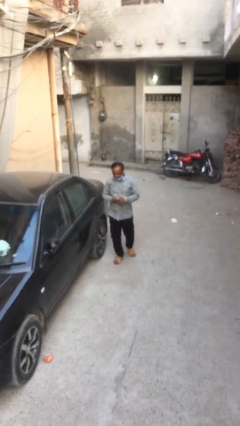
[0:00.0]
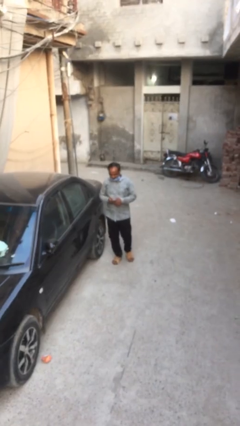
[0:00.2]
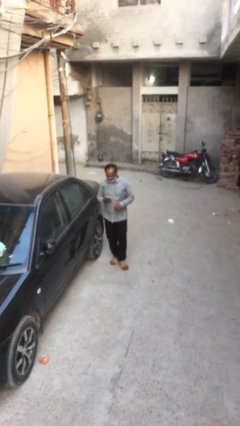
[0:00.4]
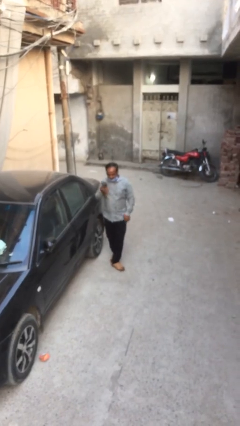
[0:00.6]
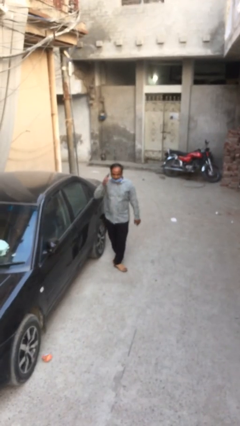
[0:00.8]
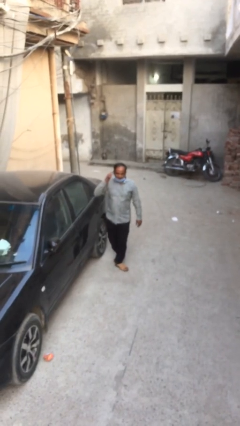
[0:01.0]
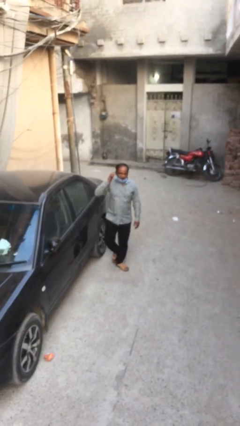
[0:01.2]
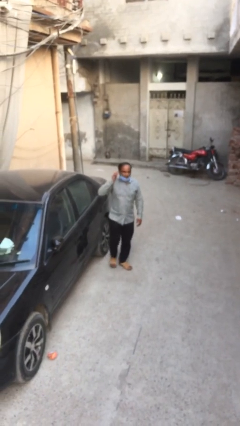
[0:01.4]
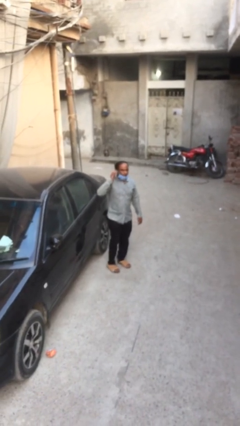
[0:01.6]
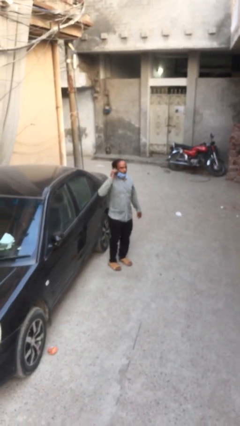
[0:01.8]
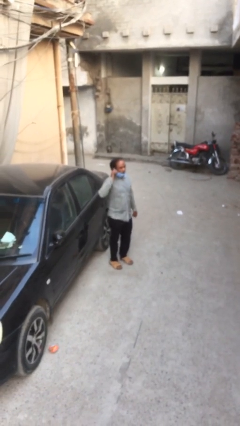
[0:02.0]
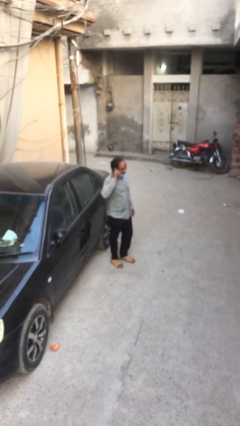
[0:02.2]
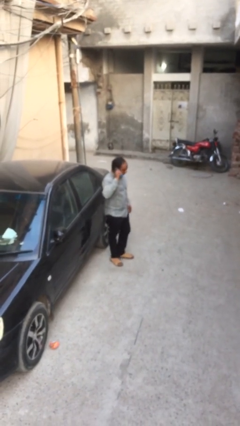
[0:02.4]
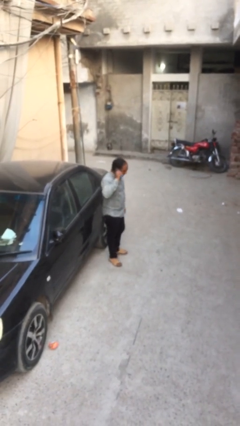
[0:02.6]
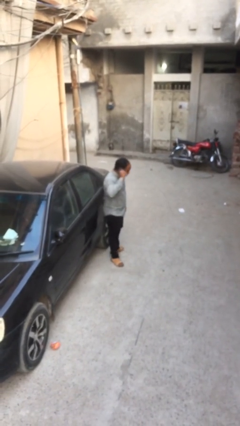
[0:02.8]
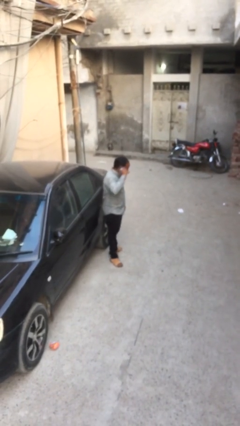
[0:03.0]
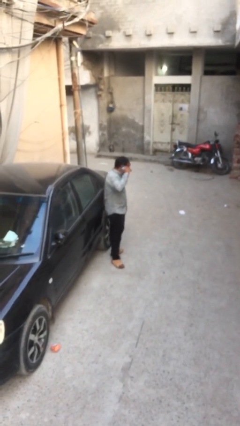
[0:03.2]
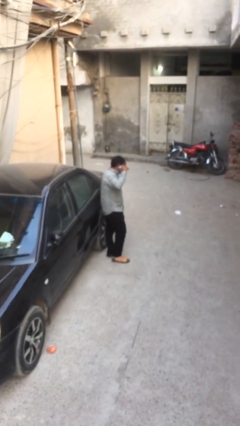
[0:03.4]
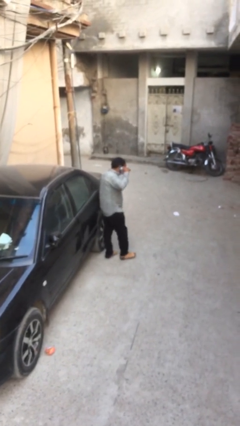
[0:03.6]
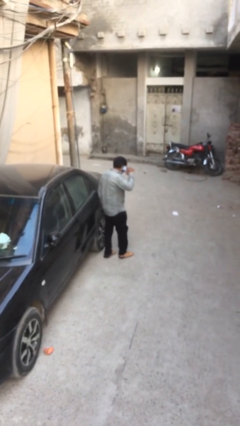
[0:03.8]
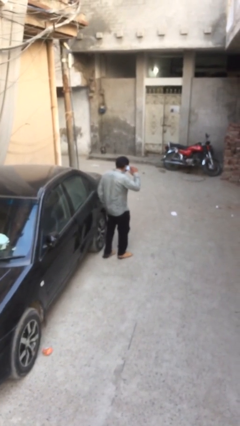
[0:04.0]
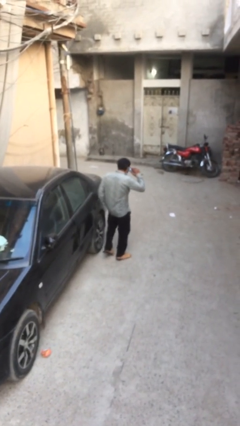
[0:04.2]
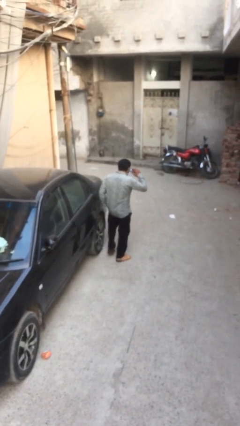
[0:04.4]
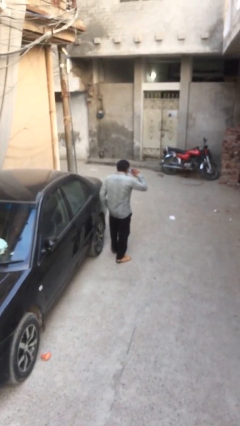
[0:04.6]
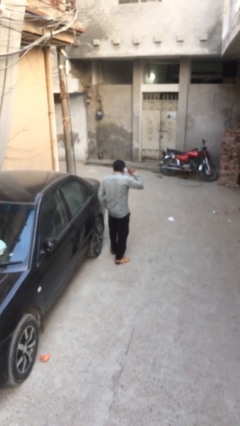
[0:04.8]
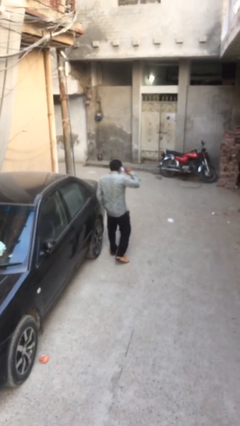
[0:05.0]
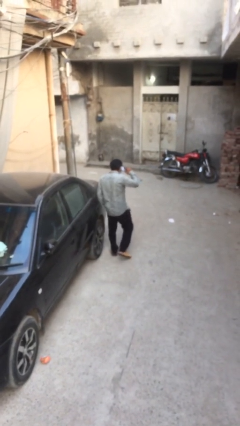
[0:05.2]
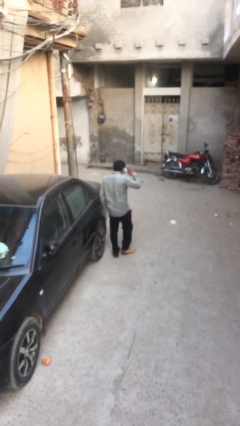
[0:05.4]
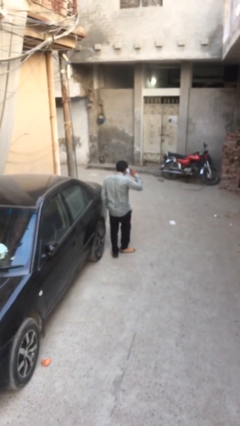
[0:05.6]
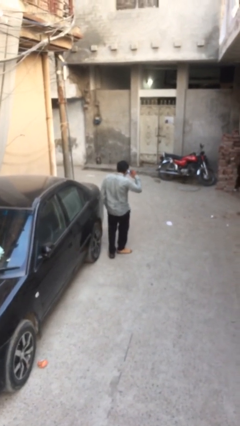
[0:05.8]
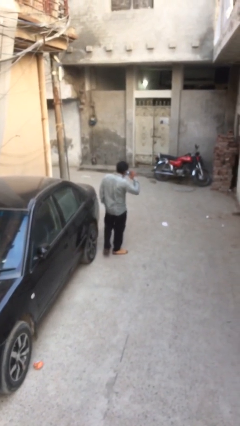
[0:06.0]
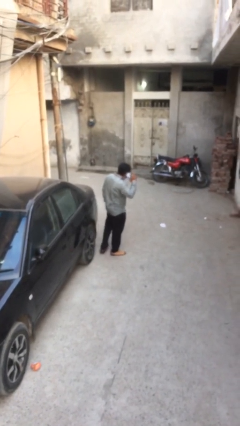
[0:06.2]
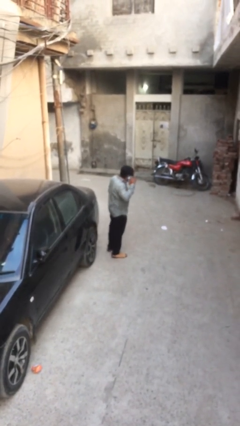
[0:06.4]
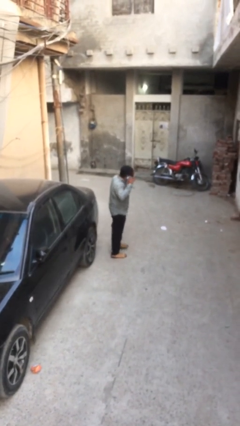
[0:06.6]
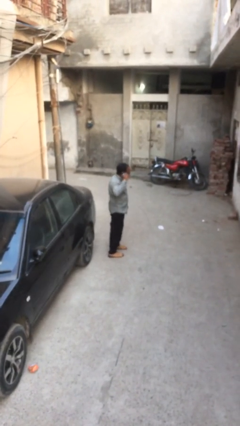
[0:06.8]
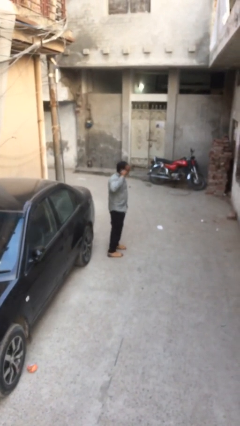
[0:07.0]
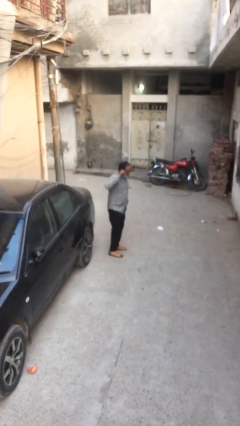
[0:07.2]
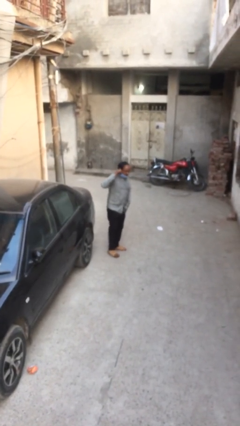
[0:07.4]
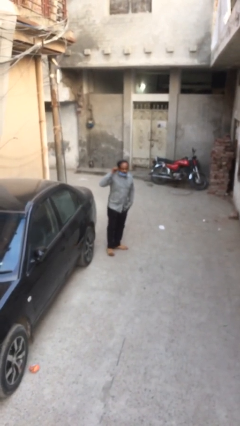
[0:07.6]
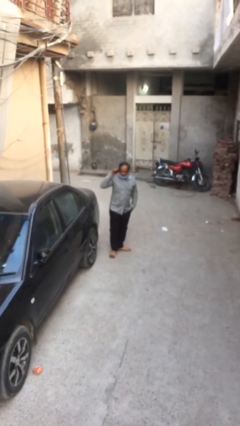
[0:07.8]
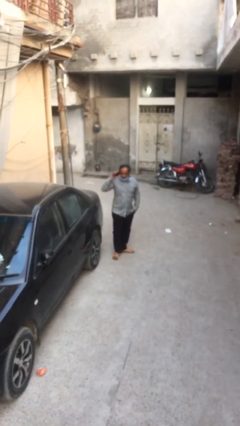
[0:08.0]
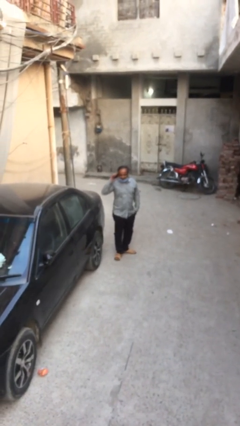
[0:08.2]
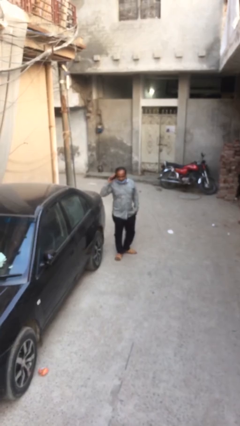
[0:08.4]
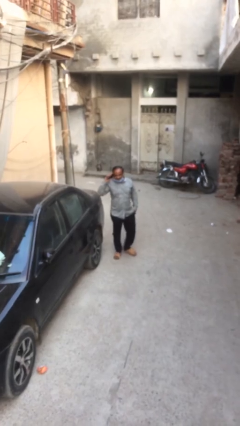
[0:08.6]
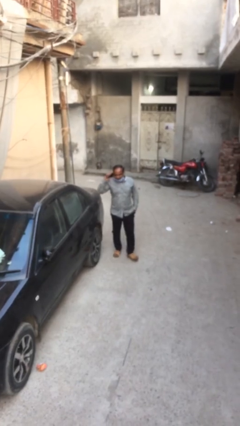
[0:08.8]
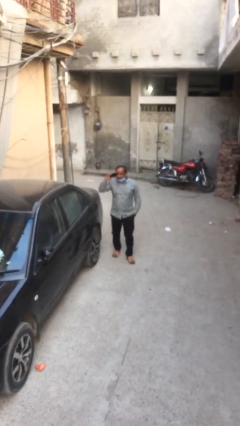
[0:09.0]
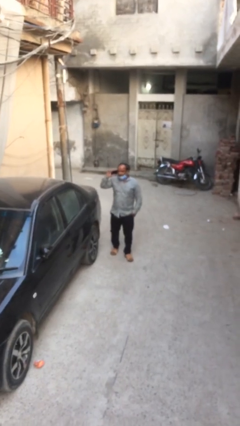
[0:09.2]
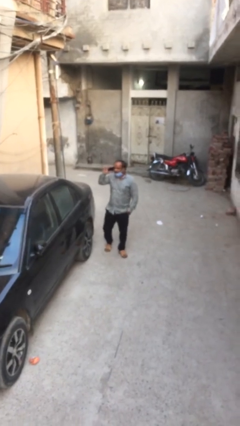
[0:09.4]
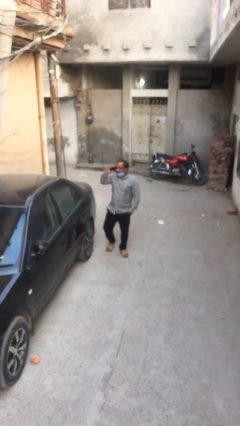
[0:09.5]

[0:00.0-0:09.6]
person talks on phone

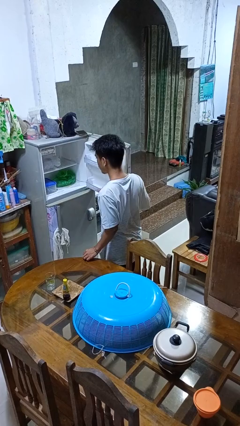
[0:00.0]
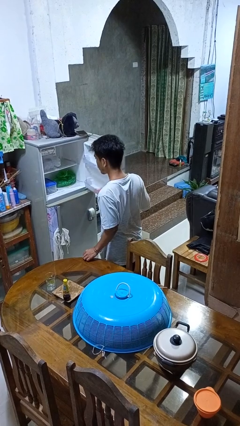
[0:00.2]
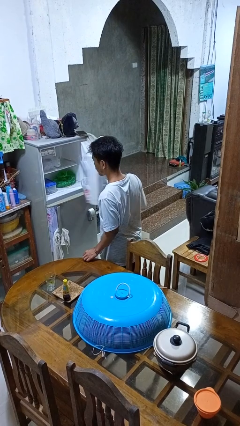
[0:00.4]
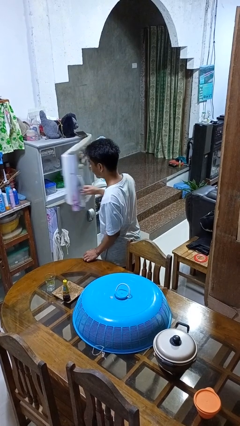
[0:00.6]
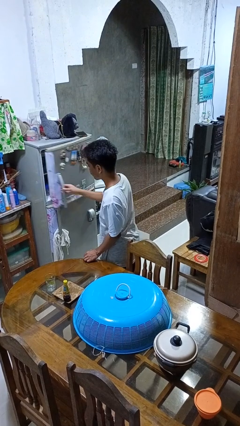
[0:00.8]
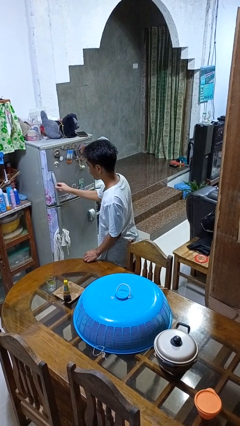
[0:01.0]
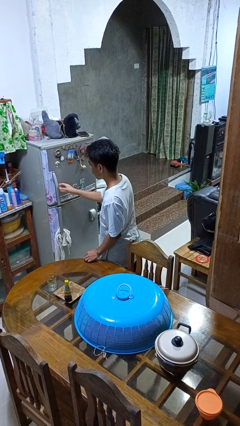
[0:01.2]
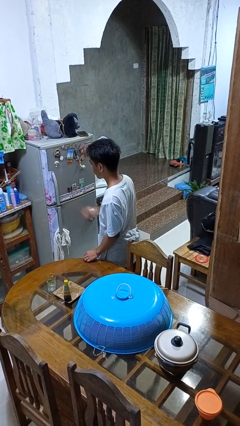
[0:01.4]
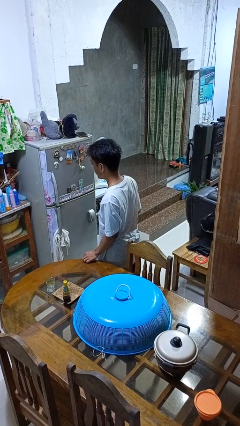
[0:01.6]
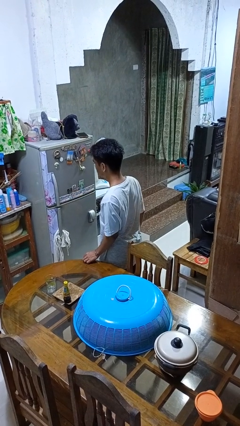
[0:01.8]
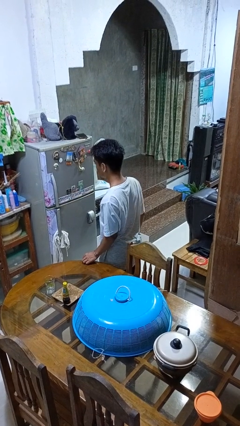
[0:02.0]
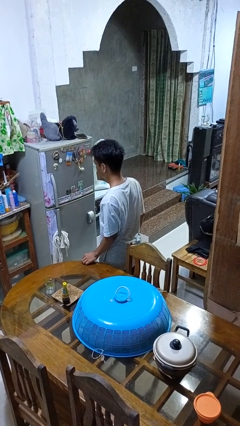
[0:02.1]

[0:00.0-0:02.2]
person closes refrigerator

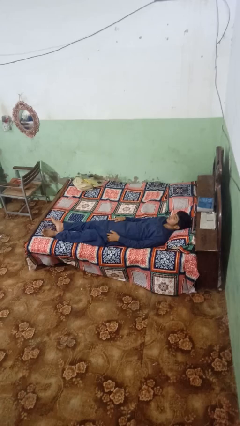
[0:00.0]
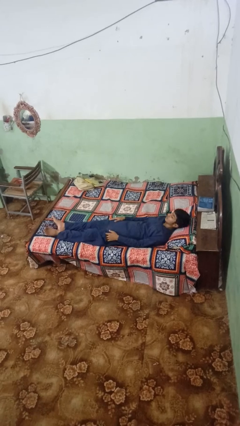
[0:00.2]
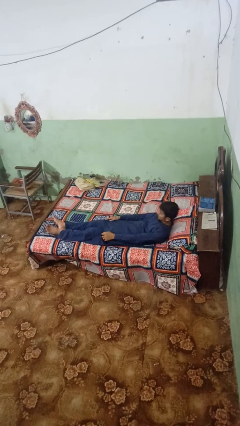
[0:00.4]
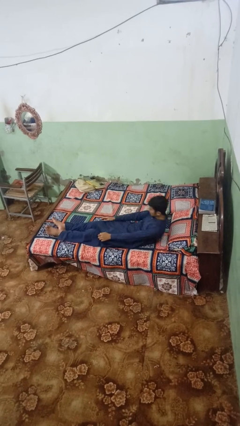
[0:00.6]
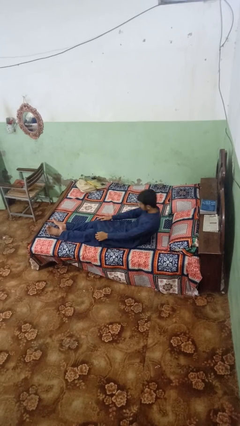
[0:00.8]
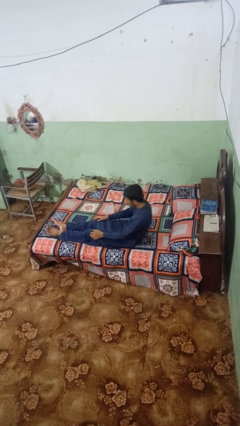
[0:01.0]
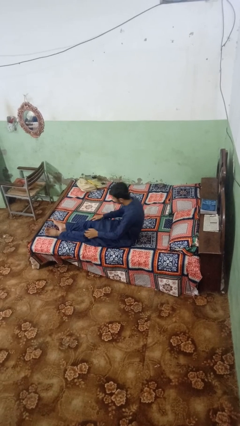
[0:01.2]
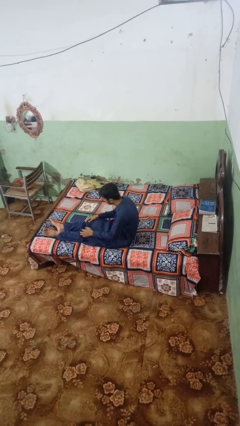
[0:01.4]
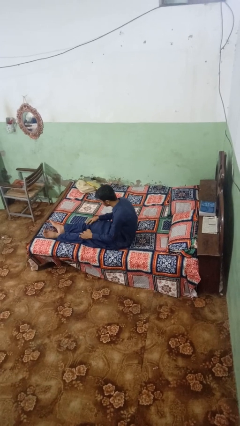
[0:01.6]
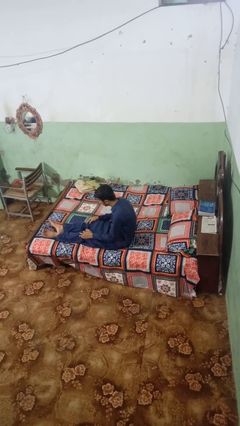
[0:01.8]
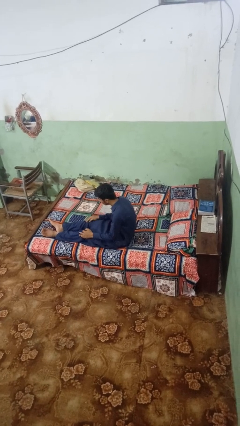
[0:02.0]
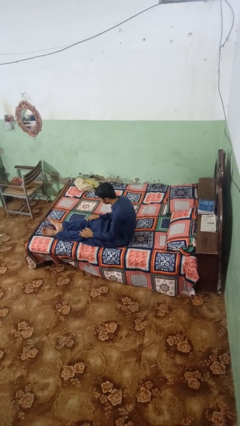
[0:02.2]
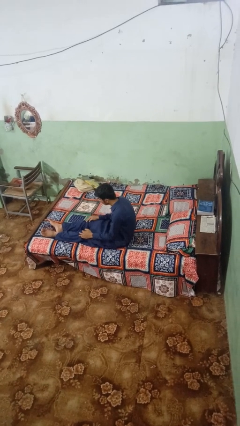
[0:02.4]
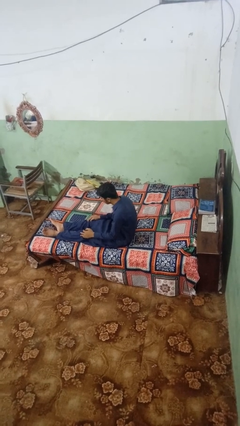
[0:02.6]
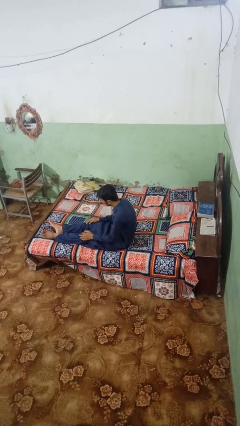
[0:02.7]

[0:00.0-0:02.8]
person stands up

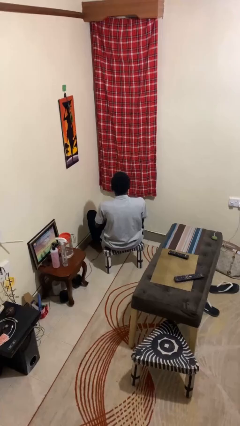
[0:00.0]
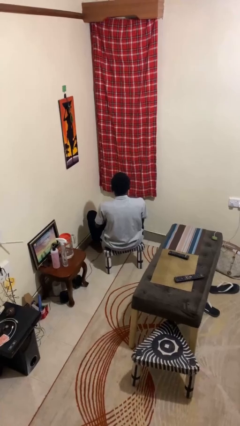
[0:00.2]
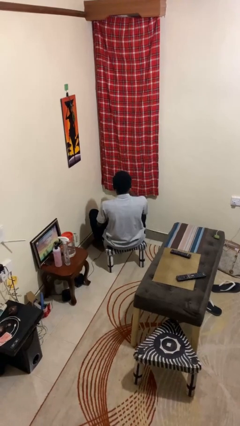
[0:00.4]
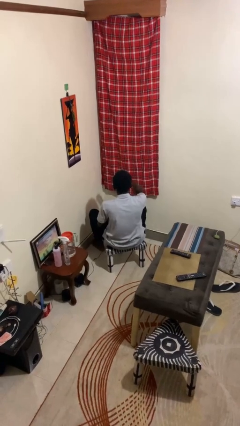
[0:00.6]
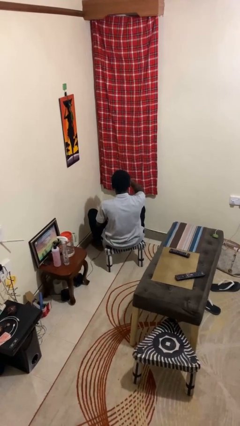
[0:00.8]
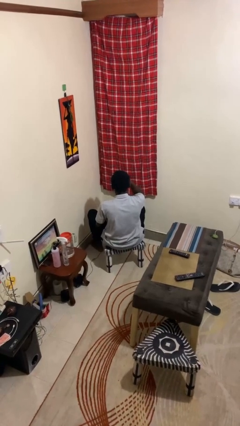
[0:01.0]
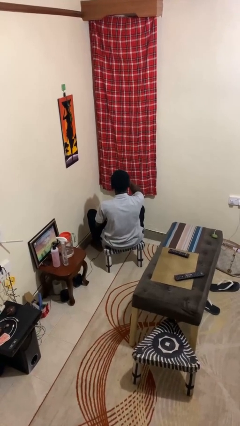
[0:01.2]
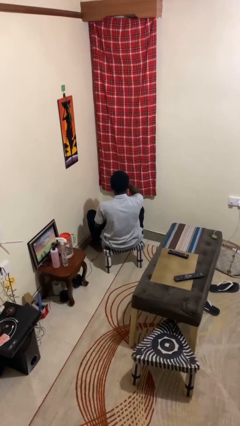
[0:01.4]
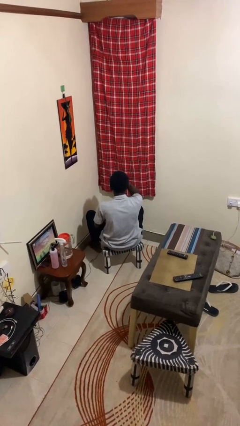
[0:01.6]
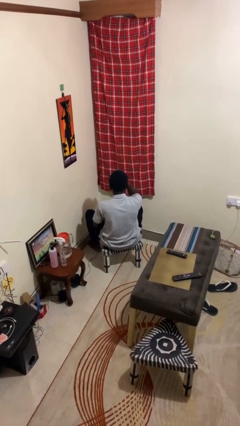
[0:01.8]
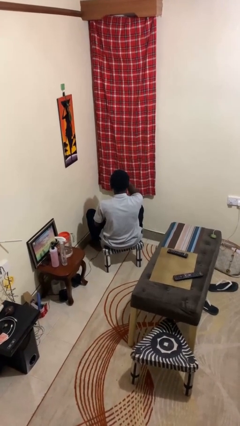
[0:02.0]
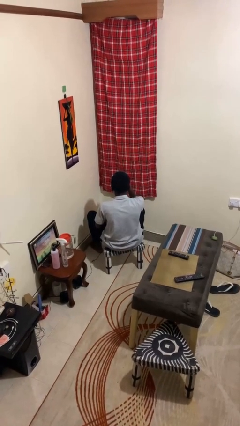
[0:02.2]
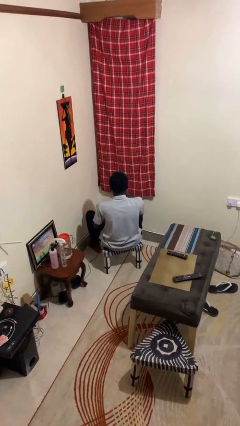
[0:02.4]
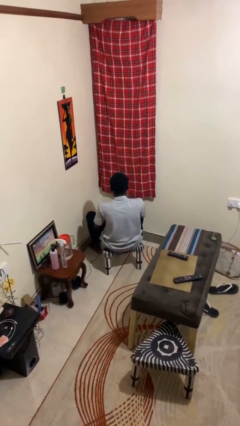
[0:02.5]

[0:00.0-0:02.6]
person scratches face

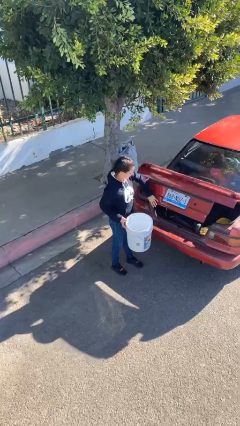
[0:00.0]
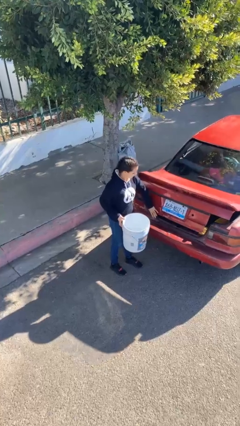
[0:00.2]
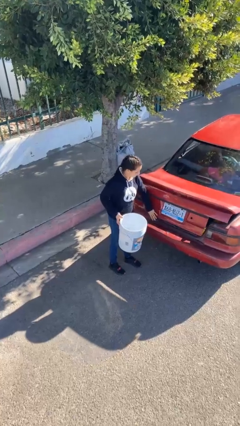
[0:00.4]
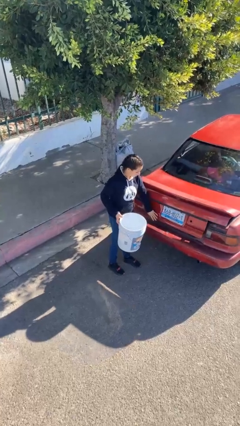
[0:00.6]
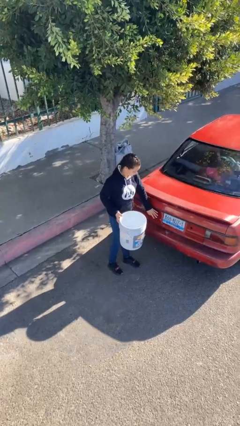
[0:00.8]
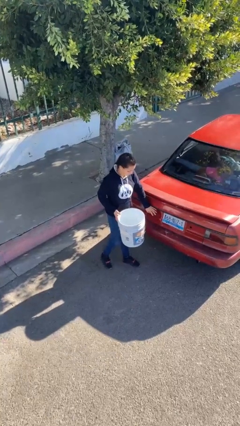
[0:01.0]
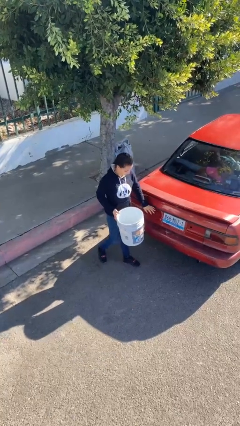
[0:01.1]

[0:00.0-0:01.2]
person closes car trunk
